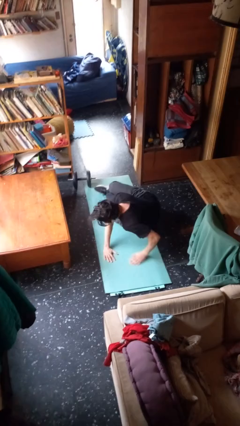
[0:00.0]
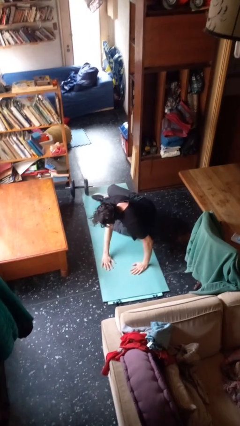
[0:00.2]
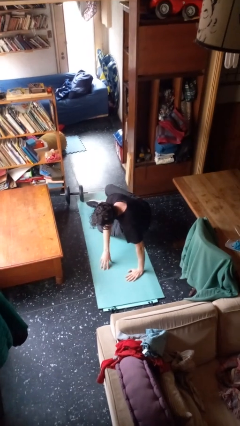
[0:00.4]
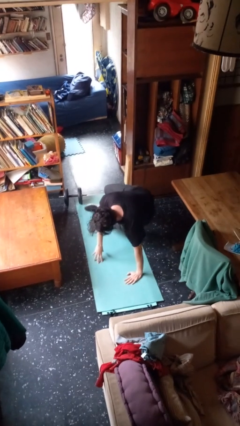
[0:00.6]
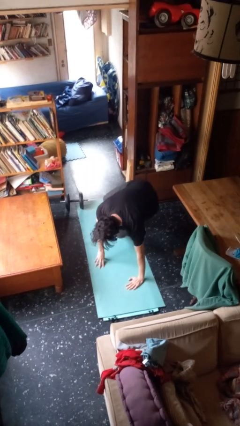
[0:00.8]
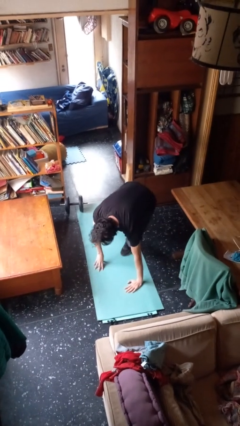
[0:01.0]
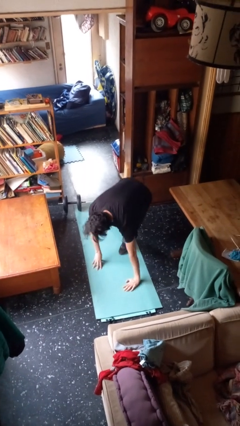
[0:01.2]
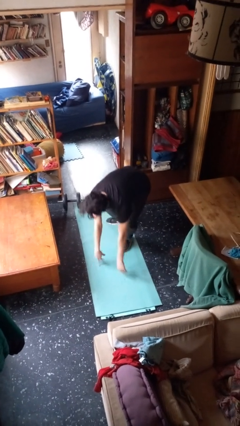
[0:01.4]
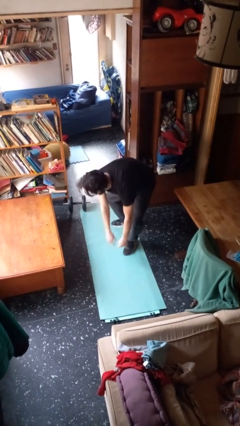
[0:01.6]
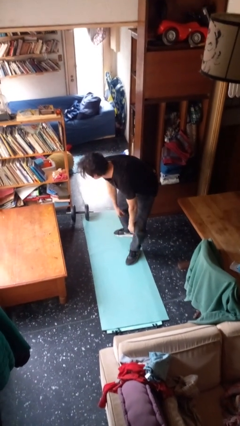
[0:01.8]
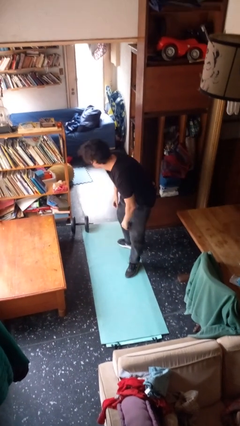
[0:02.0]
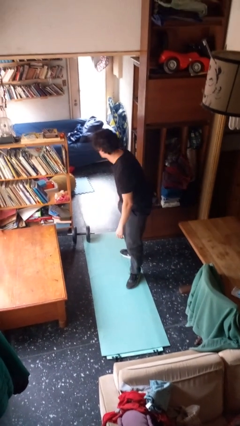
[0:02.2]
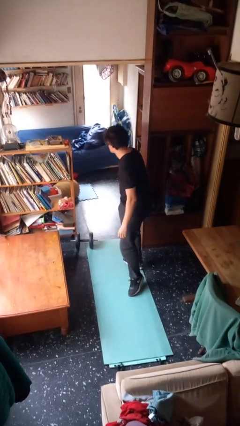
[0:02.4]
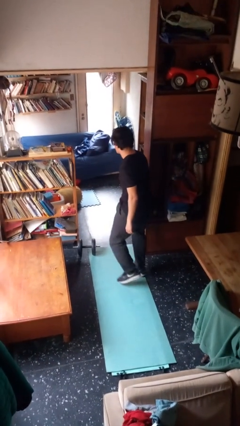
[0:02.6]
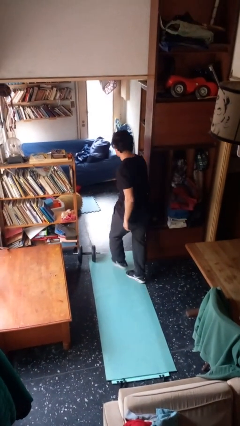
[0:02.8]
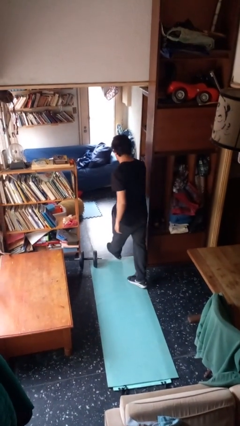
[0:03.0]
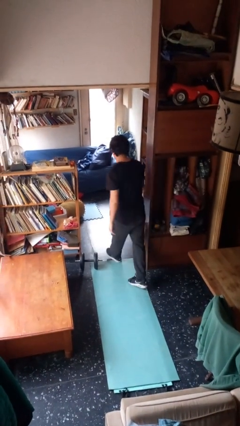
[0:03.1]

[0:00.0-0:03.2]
person stands up from floor

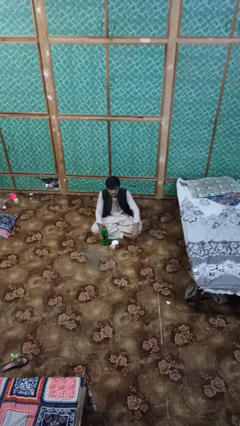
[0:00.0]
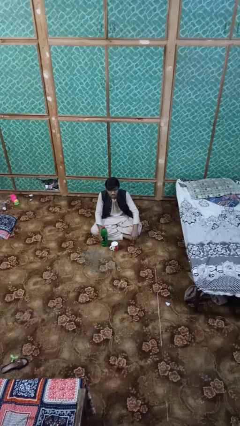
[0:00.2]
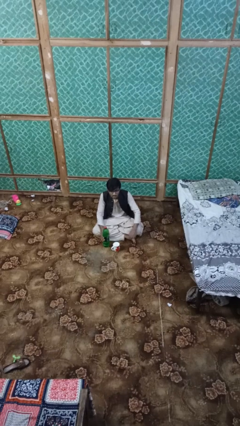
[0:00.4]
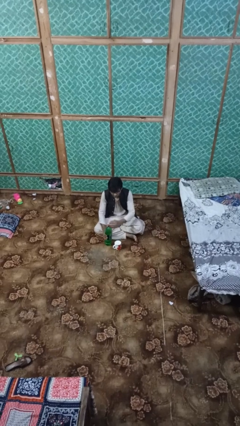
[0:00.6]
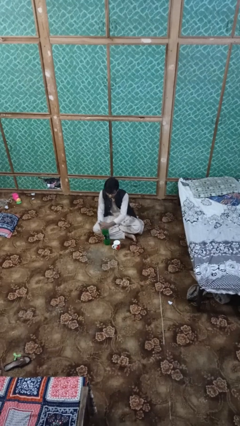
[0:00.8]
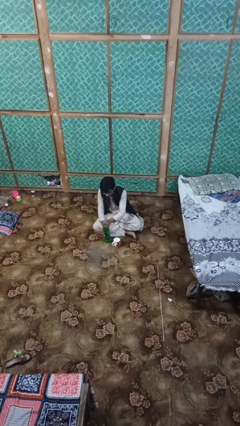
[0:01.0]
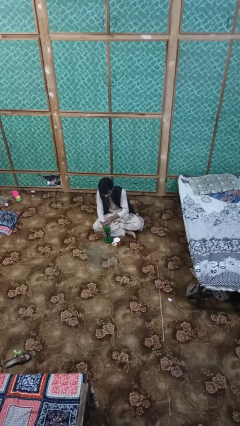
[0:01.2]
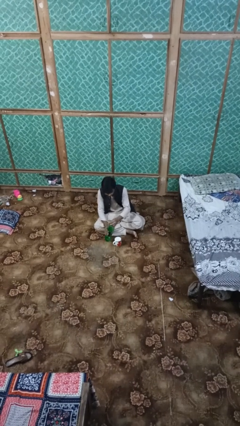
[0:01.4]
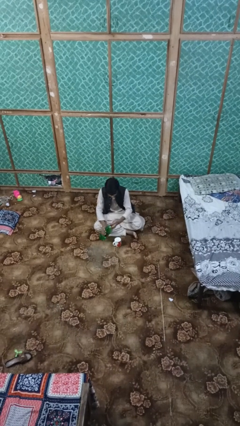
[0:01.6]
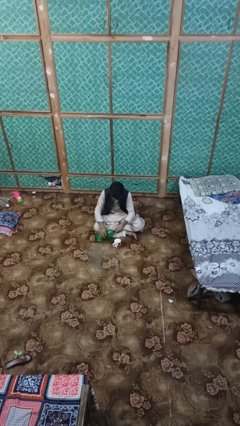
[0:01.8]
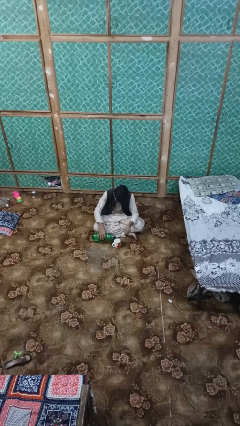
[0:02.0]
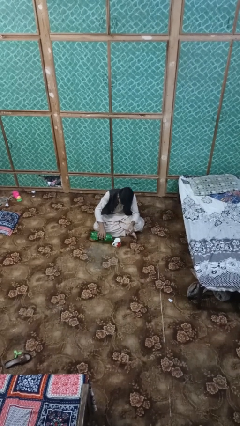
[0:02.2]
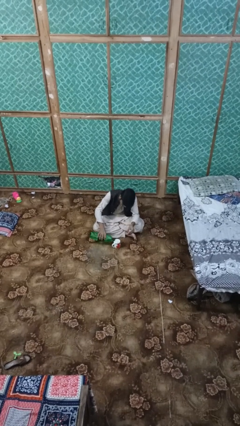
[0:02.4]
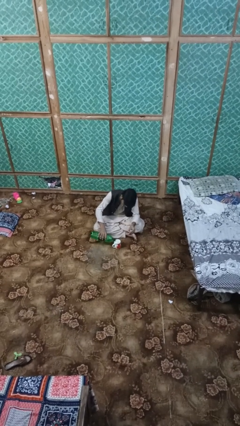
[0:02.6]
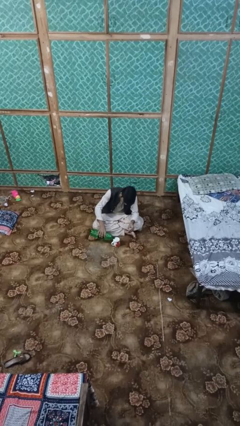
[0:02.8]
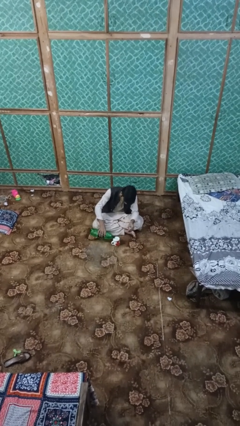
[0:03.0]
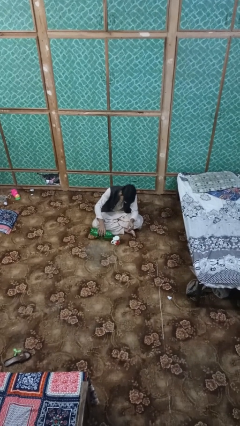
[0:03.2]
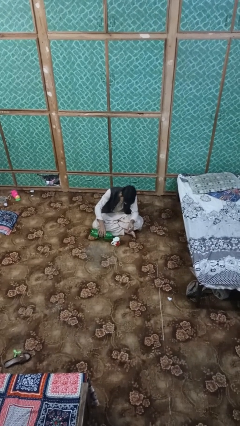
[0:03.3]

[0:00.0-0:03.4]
person pours liquid into cup

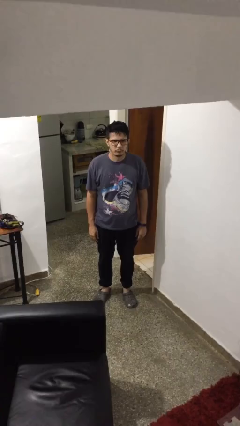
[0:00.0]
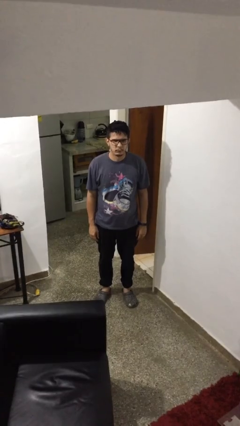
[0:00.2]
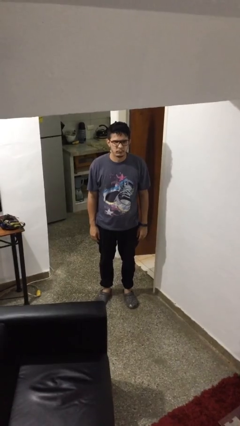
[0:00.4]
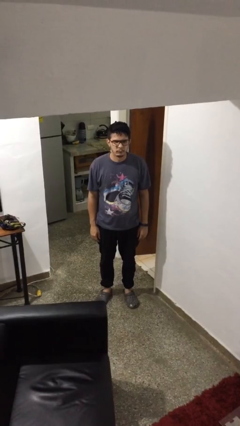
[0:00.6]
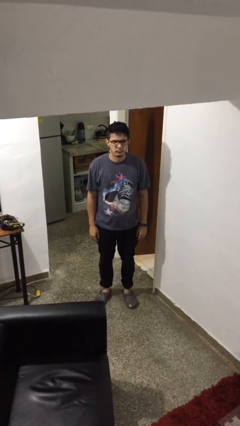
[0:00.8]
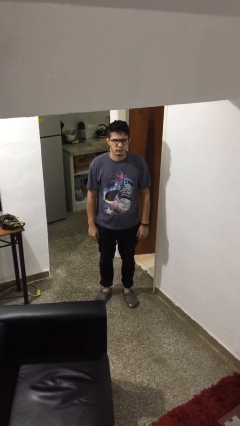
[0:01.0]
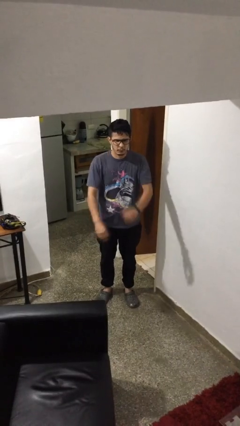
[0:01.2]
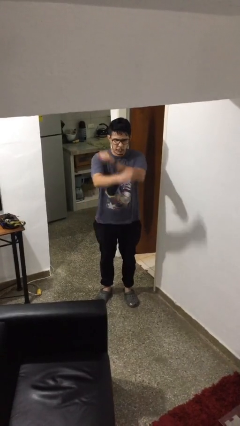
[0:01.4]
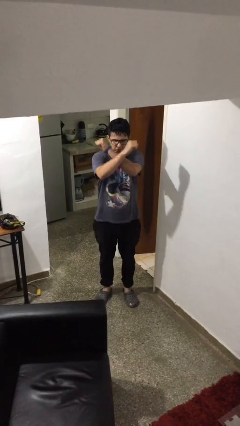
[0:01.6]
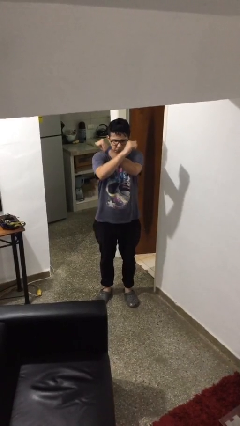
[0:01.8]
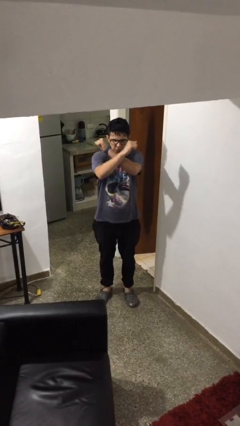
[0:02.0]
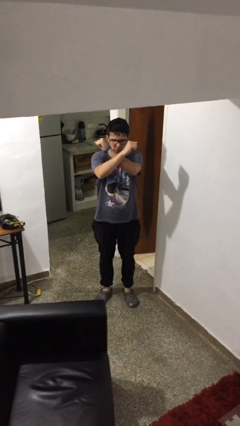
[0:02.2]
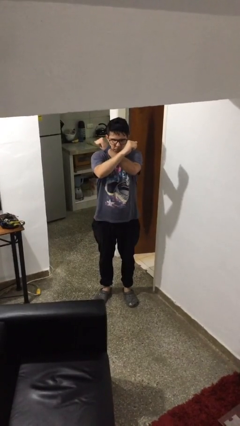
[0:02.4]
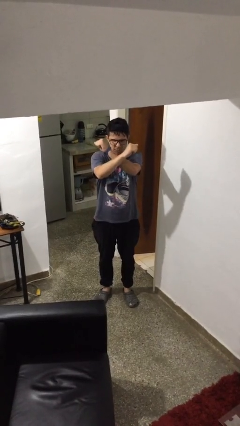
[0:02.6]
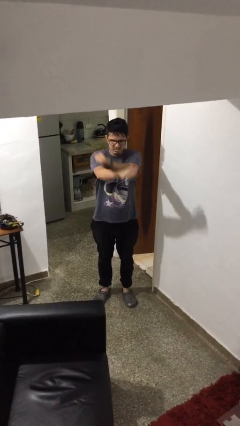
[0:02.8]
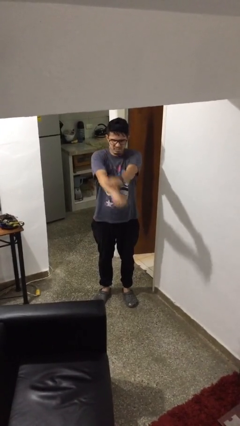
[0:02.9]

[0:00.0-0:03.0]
person gestures arms x

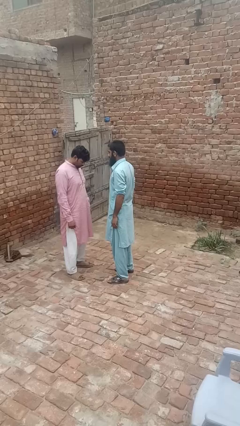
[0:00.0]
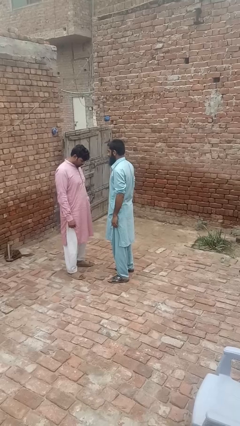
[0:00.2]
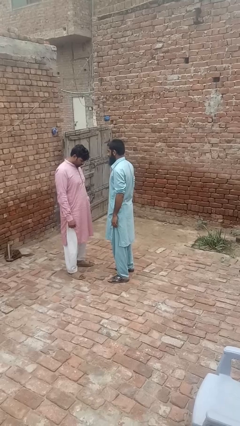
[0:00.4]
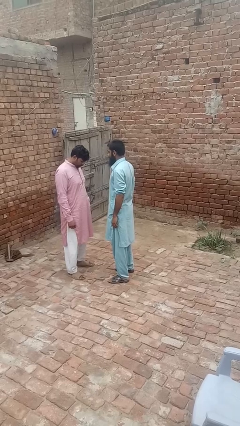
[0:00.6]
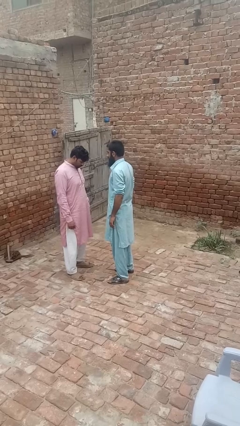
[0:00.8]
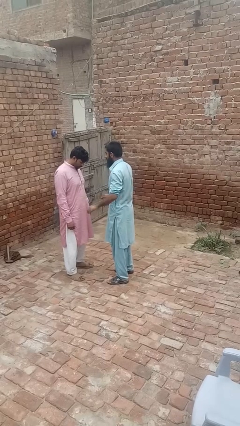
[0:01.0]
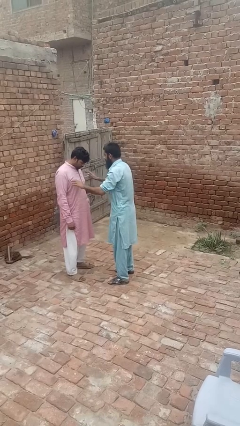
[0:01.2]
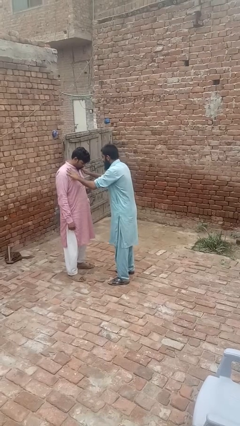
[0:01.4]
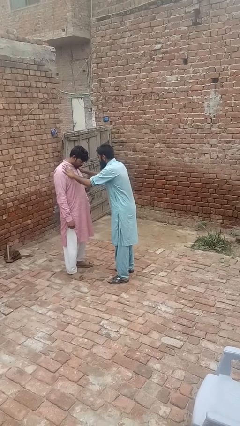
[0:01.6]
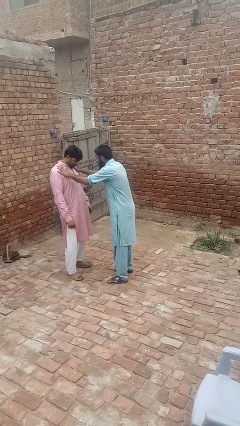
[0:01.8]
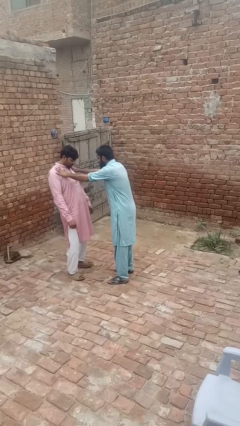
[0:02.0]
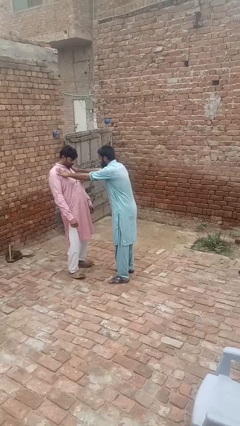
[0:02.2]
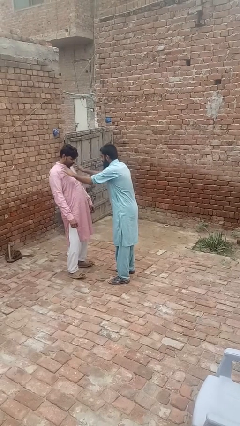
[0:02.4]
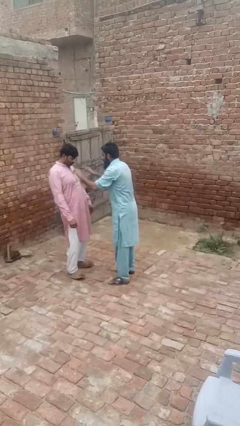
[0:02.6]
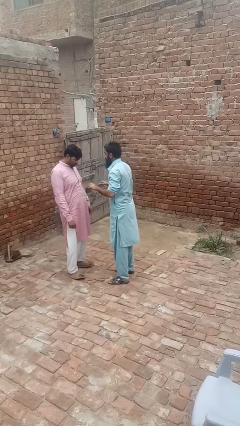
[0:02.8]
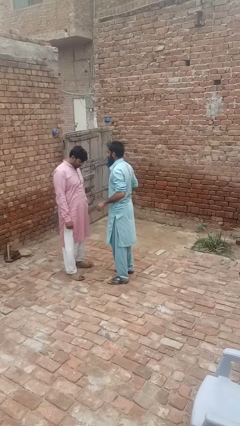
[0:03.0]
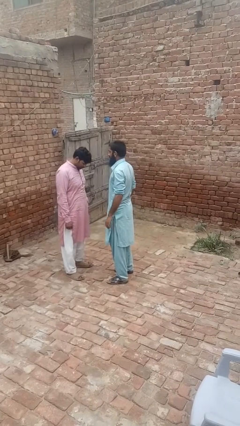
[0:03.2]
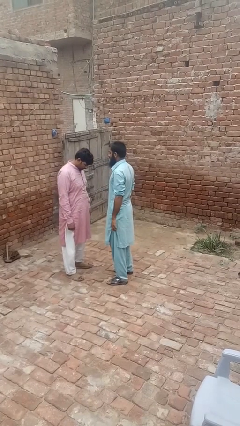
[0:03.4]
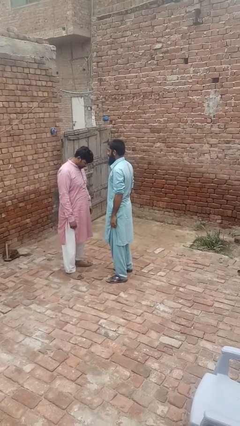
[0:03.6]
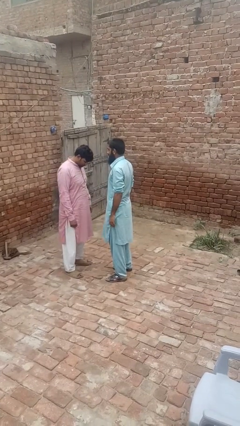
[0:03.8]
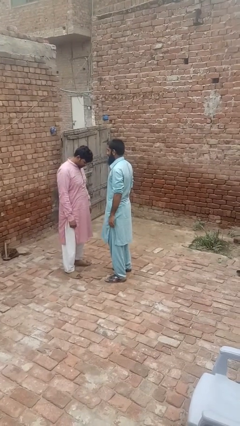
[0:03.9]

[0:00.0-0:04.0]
person shoves person

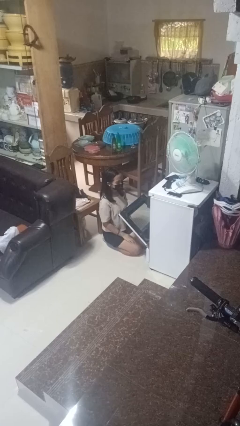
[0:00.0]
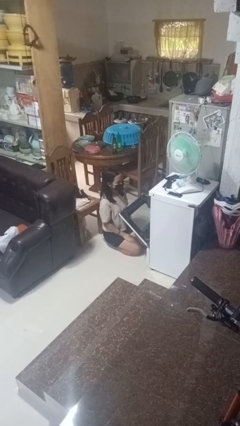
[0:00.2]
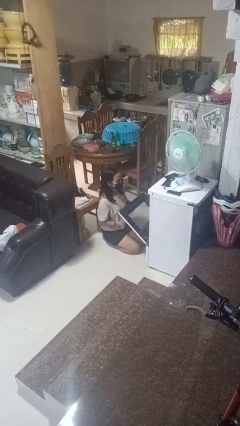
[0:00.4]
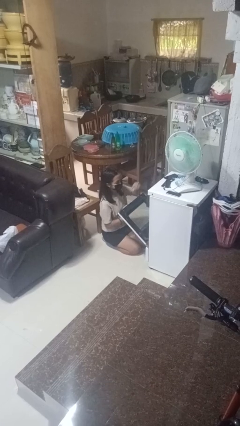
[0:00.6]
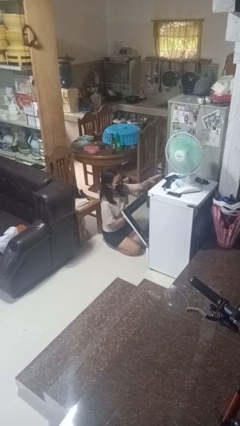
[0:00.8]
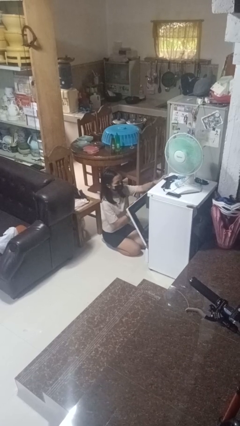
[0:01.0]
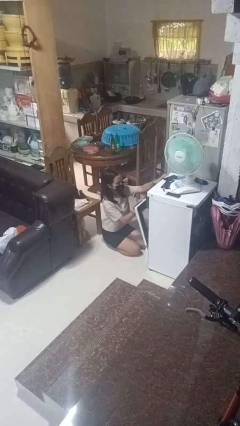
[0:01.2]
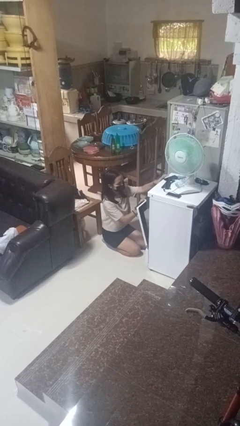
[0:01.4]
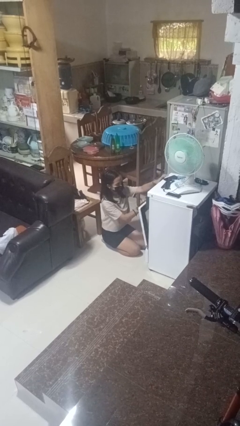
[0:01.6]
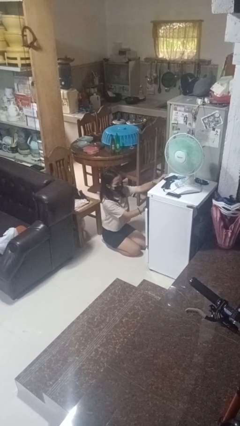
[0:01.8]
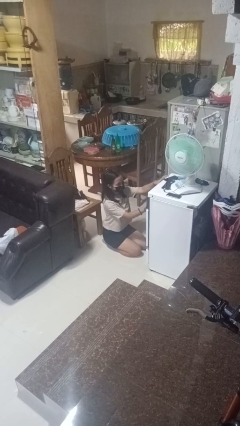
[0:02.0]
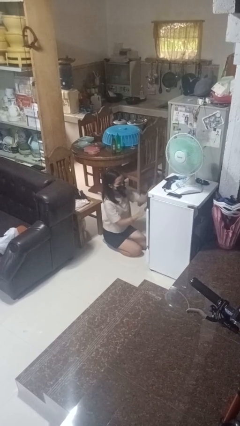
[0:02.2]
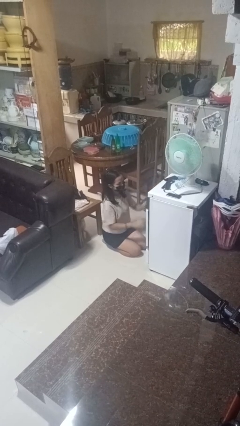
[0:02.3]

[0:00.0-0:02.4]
person closes oven door

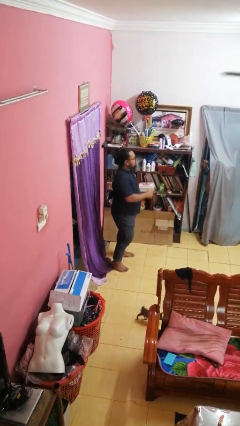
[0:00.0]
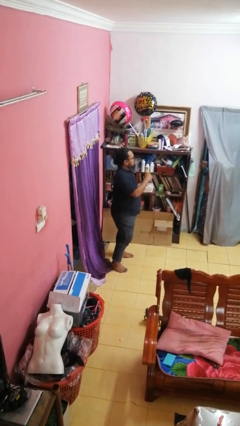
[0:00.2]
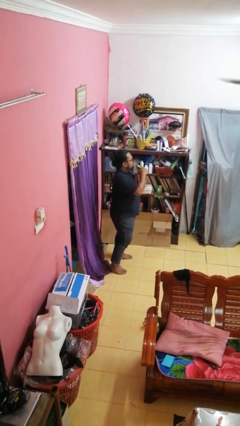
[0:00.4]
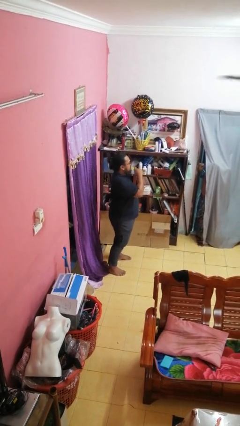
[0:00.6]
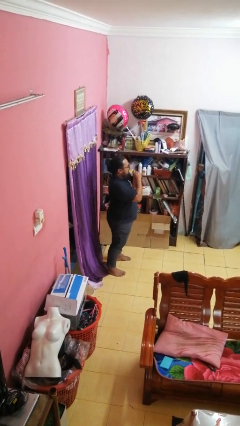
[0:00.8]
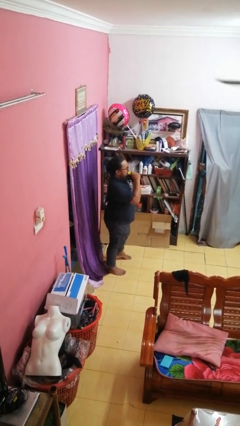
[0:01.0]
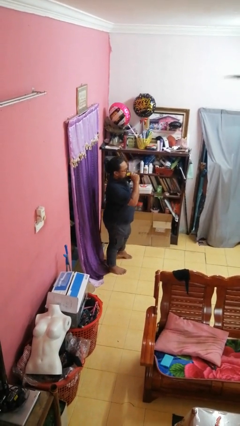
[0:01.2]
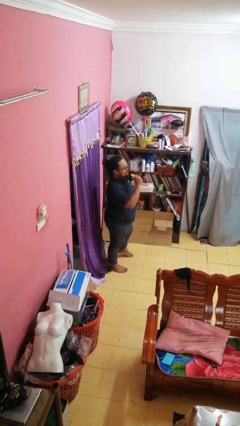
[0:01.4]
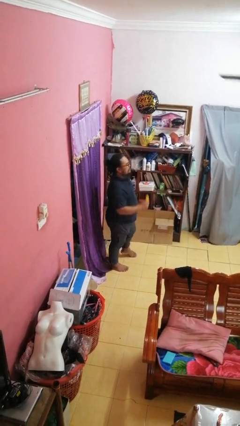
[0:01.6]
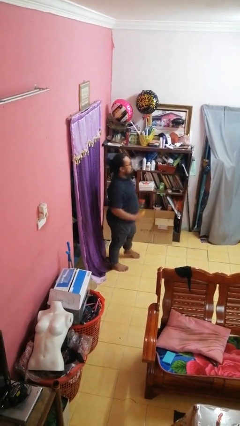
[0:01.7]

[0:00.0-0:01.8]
person eats banana
